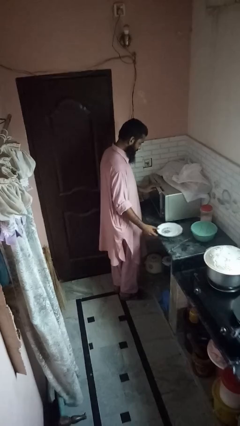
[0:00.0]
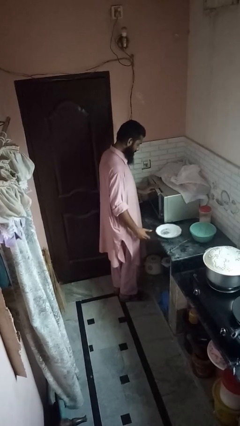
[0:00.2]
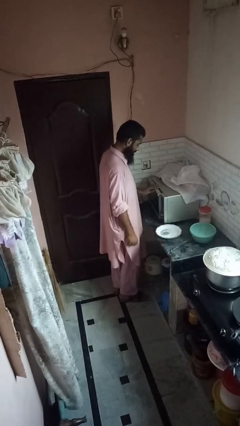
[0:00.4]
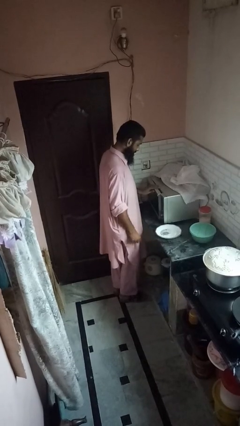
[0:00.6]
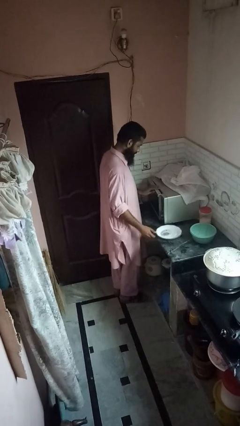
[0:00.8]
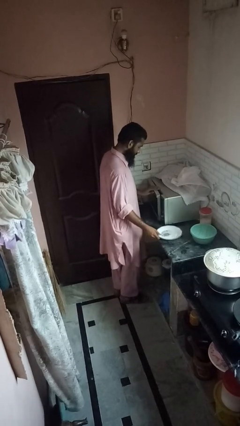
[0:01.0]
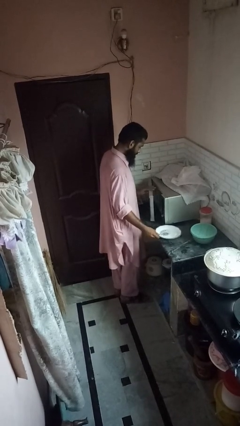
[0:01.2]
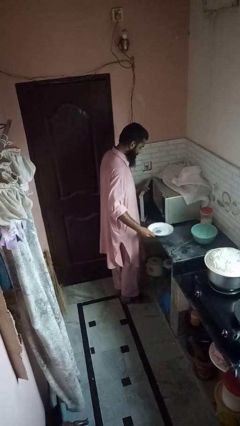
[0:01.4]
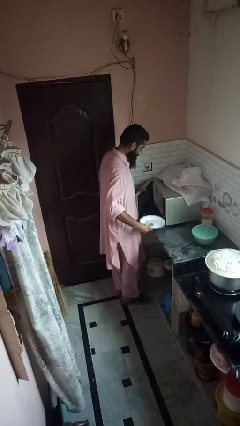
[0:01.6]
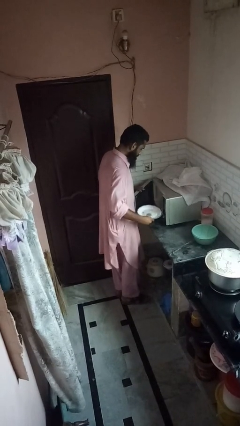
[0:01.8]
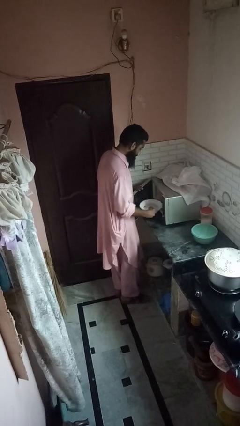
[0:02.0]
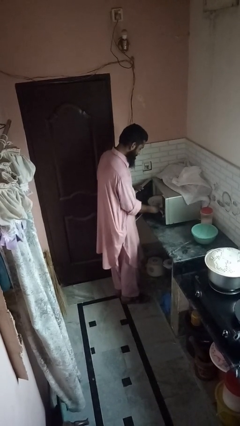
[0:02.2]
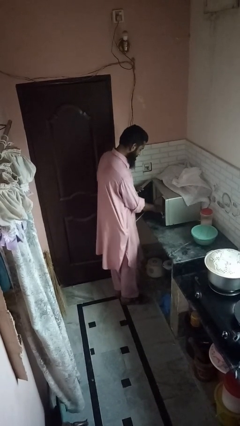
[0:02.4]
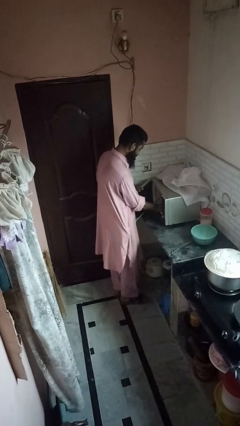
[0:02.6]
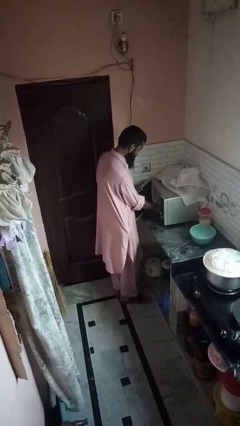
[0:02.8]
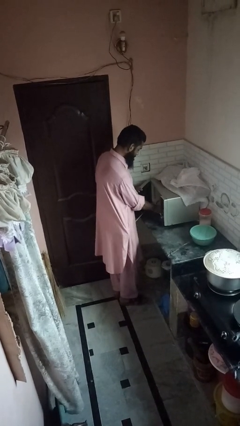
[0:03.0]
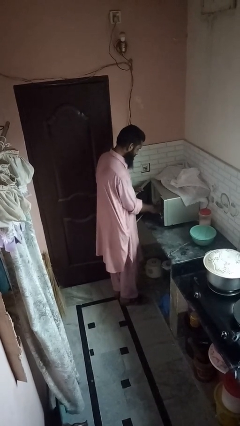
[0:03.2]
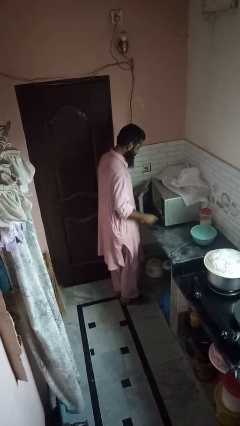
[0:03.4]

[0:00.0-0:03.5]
person puts object into oven

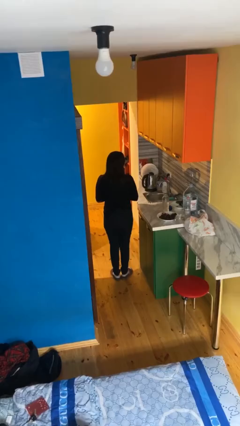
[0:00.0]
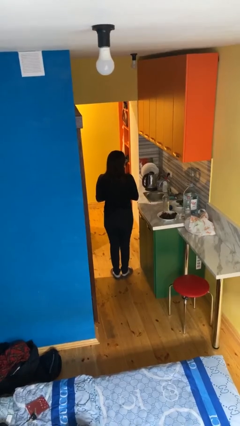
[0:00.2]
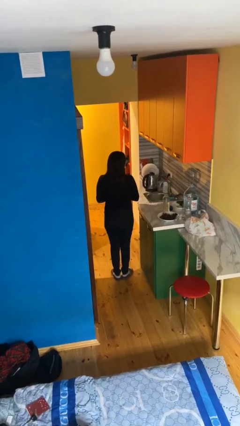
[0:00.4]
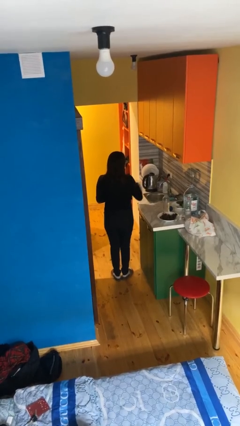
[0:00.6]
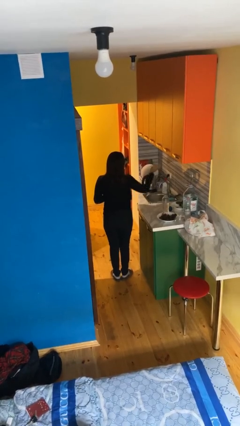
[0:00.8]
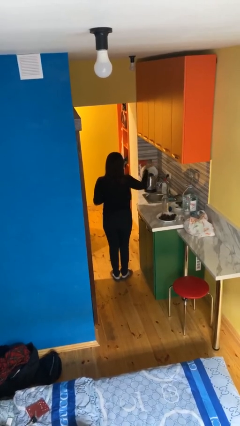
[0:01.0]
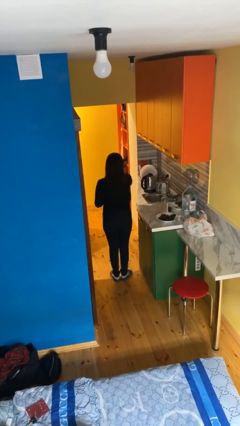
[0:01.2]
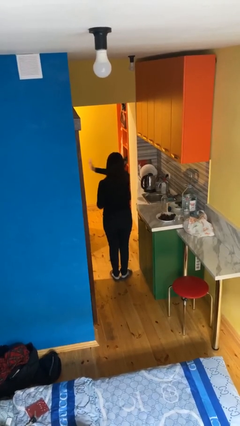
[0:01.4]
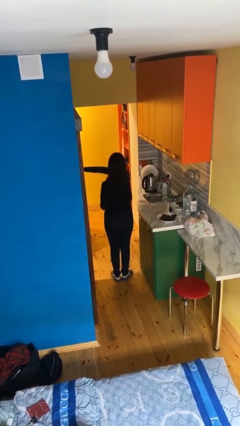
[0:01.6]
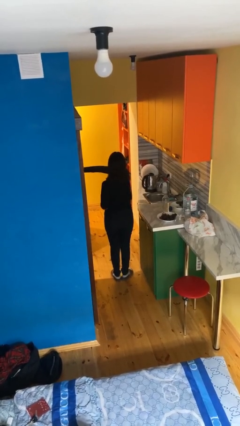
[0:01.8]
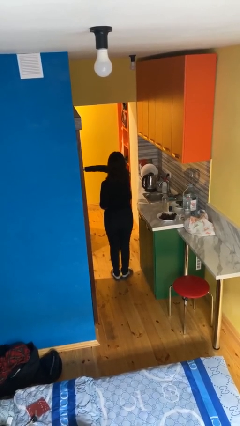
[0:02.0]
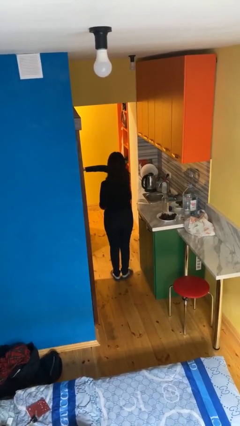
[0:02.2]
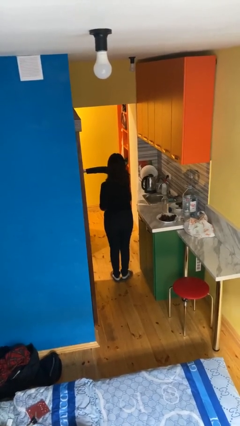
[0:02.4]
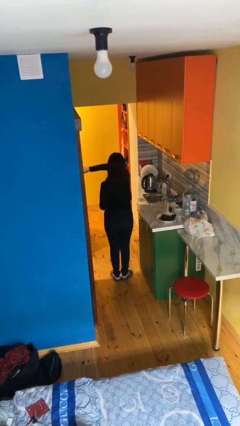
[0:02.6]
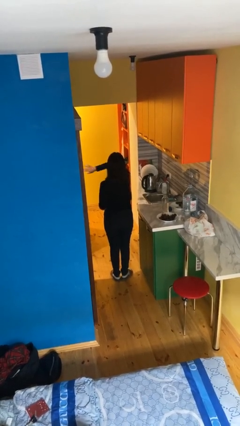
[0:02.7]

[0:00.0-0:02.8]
person gestures swipe left

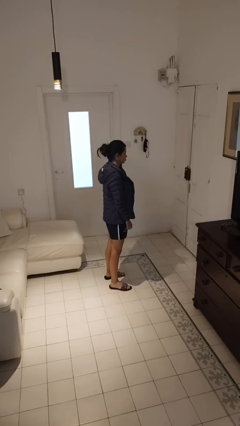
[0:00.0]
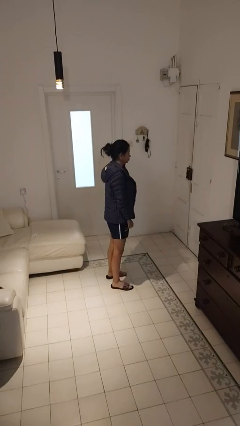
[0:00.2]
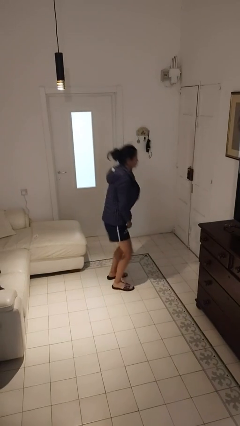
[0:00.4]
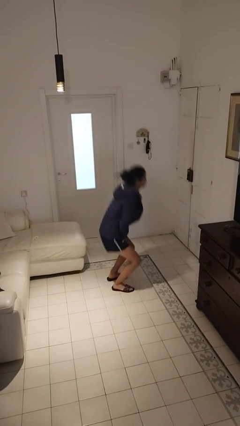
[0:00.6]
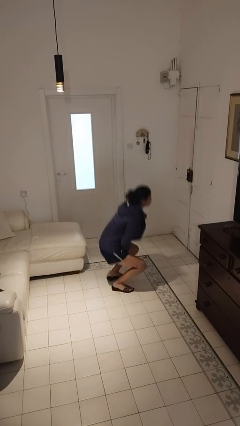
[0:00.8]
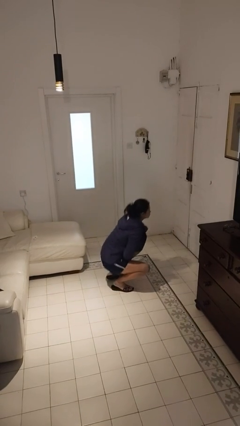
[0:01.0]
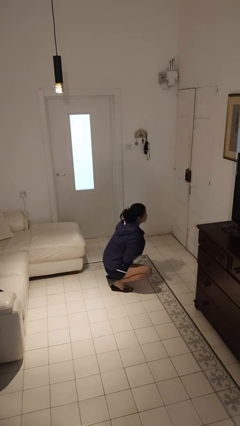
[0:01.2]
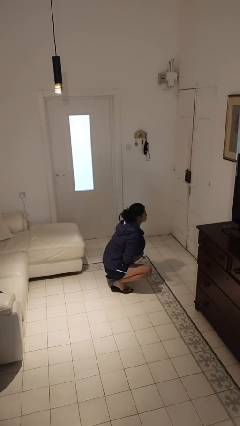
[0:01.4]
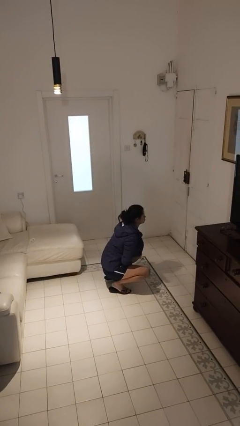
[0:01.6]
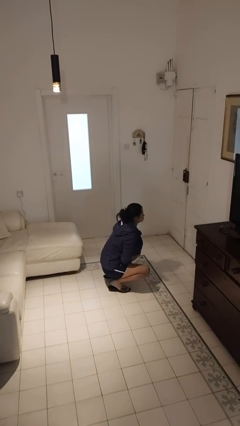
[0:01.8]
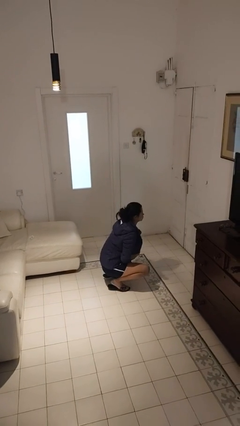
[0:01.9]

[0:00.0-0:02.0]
person squats

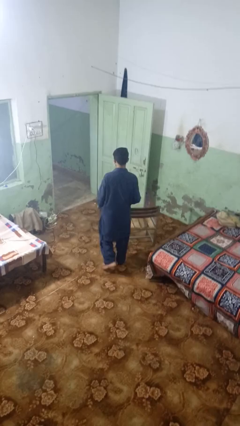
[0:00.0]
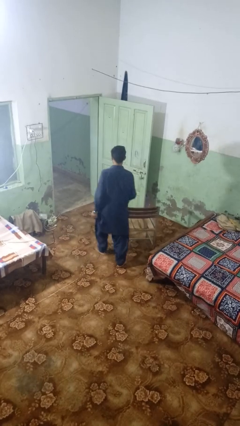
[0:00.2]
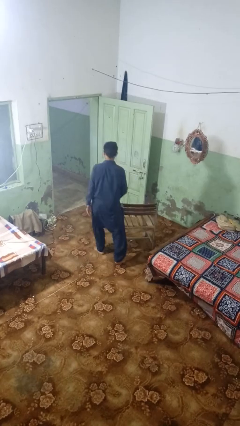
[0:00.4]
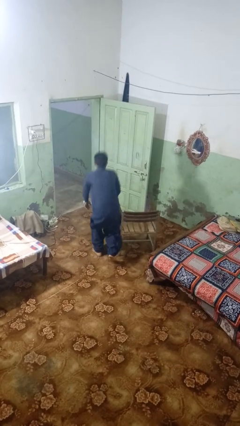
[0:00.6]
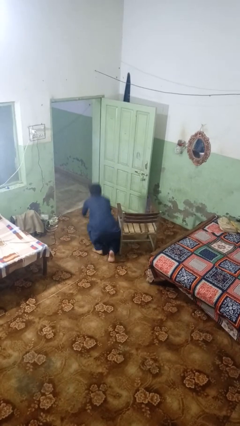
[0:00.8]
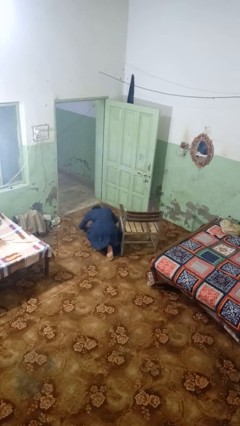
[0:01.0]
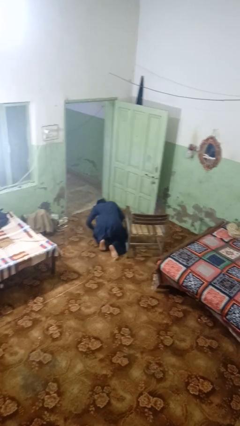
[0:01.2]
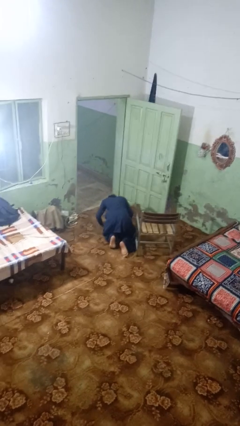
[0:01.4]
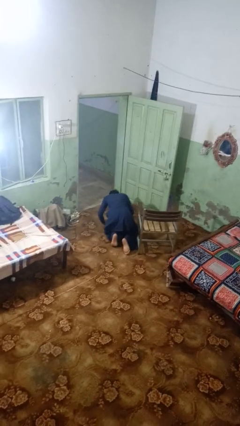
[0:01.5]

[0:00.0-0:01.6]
person lies down on floor

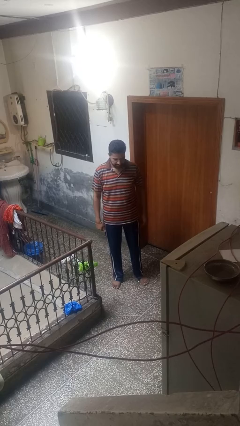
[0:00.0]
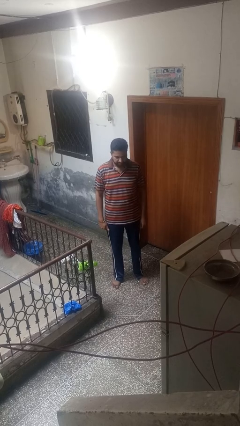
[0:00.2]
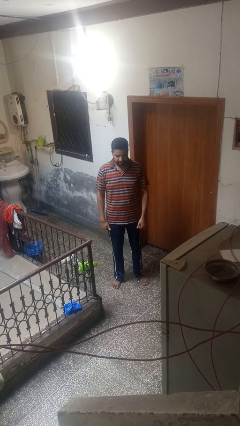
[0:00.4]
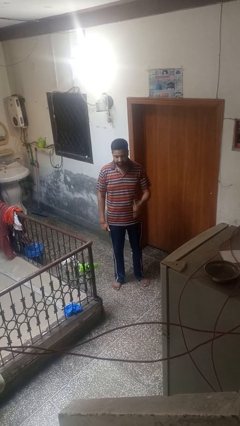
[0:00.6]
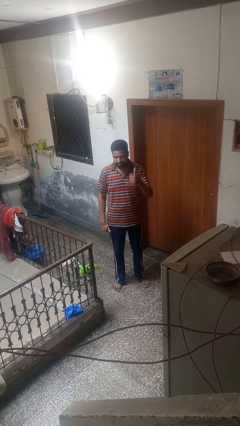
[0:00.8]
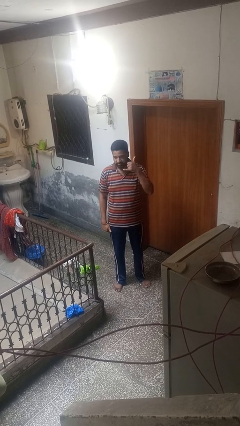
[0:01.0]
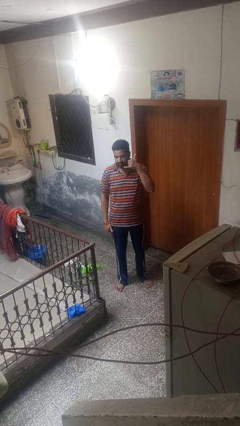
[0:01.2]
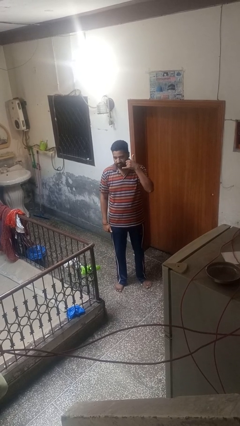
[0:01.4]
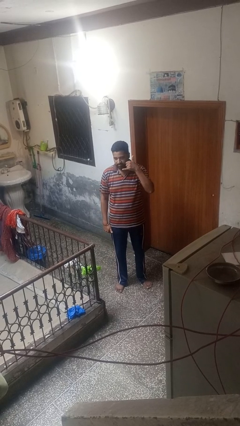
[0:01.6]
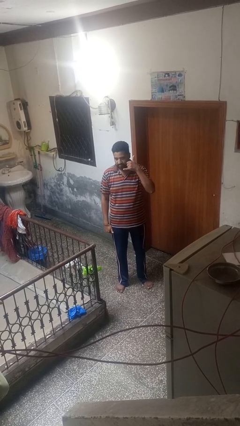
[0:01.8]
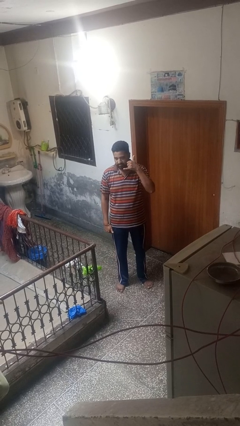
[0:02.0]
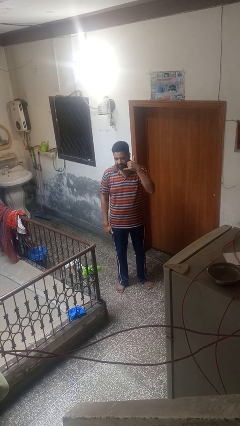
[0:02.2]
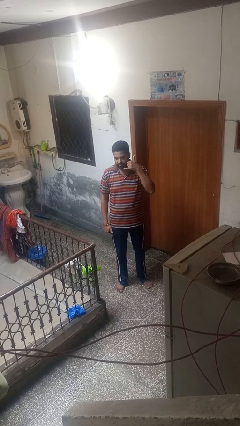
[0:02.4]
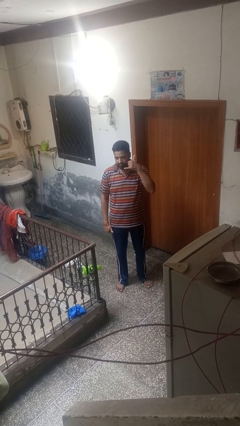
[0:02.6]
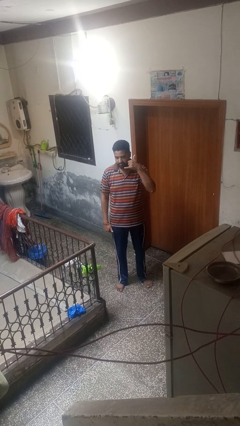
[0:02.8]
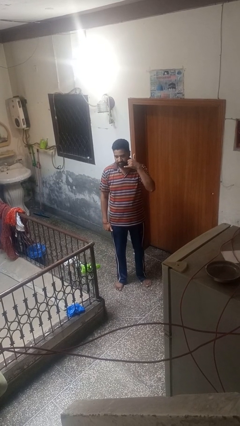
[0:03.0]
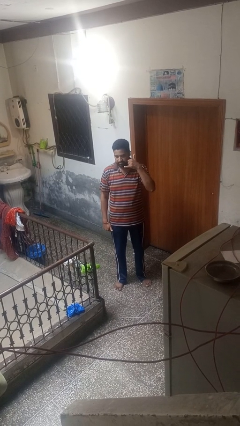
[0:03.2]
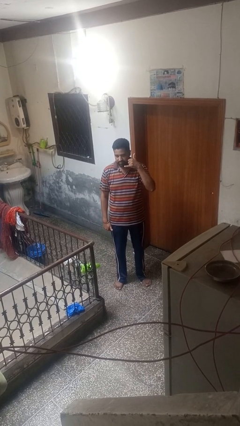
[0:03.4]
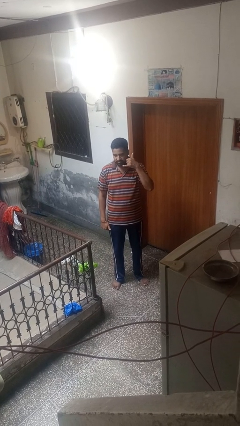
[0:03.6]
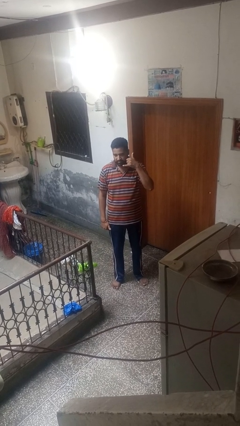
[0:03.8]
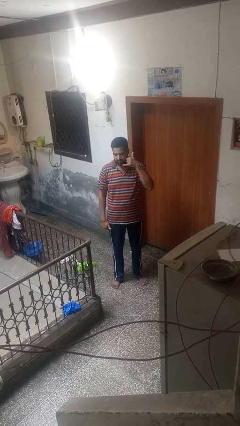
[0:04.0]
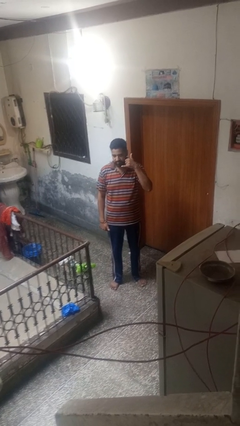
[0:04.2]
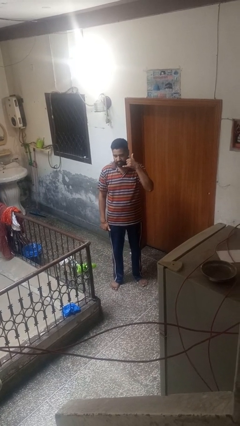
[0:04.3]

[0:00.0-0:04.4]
person gestures call me

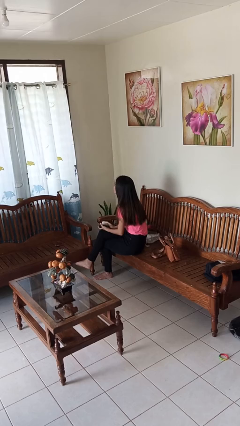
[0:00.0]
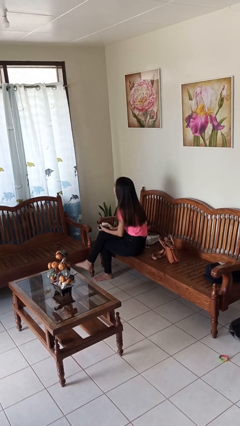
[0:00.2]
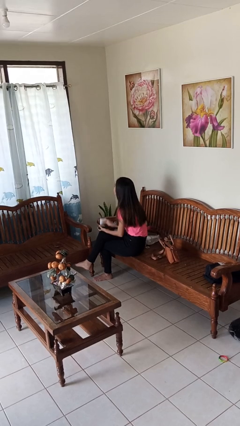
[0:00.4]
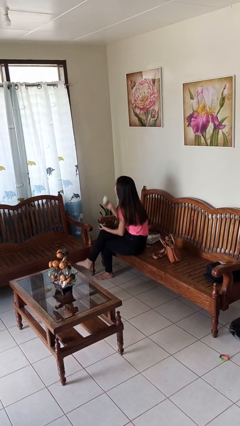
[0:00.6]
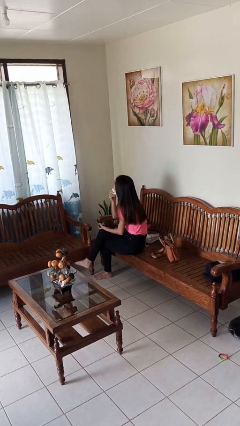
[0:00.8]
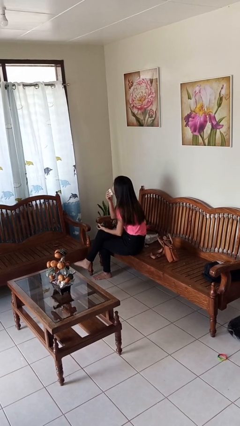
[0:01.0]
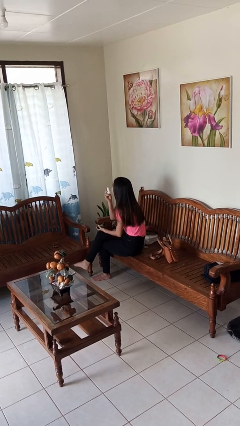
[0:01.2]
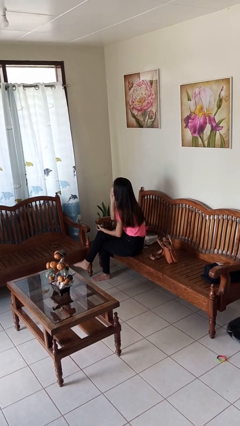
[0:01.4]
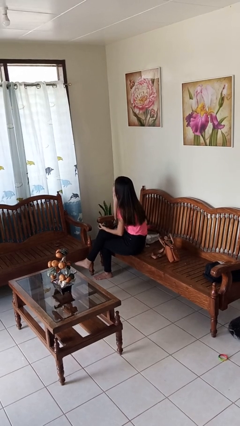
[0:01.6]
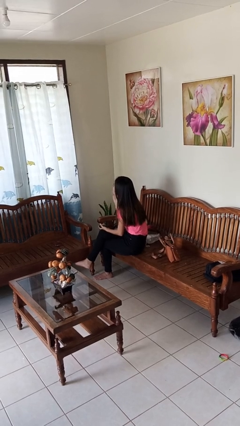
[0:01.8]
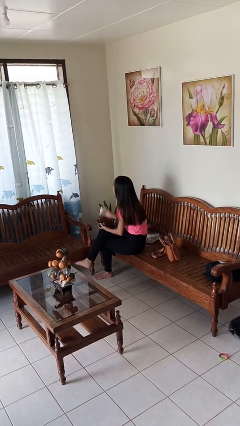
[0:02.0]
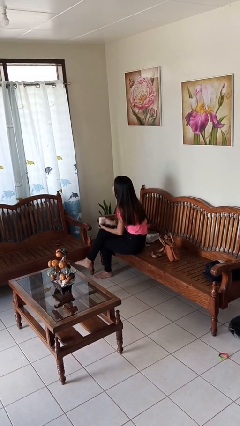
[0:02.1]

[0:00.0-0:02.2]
person applies foundation makeup

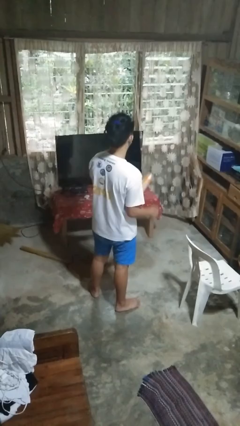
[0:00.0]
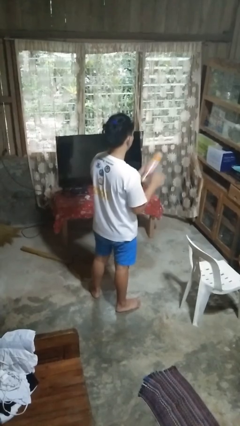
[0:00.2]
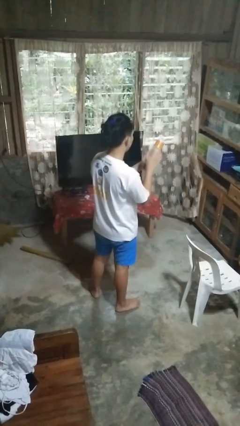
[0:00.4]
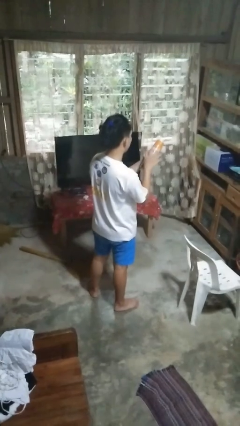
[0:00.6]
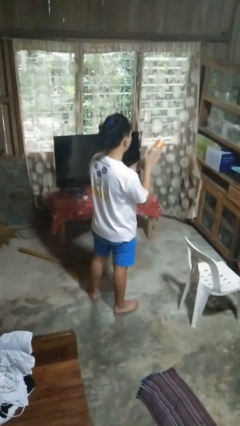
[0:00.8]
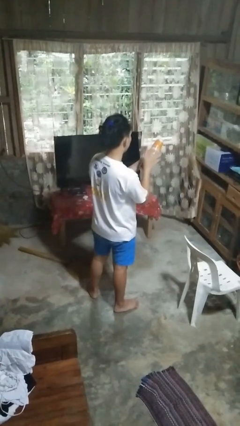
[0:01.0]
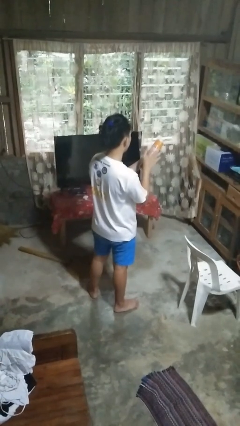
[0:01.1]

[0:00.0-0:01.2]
person taps object with finger
